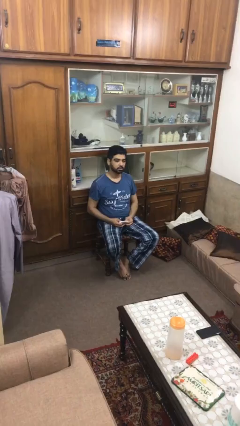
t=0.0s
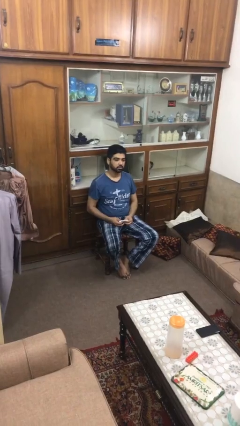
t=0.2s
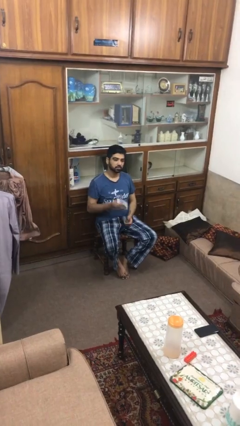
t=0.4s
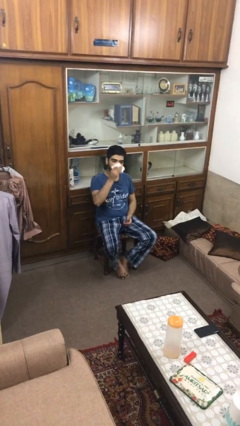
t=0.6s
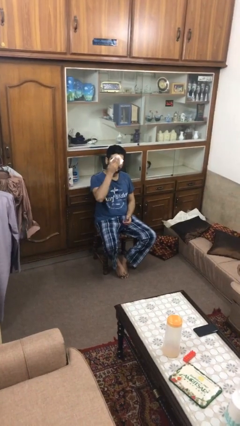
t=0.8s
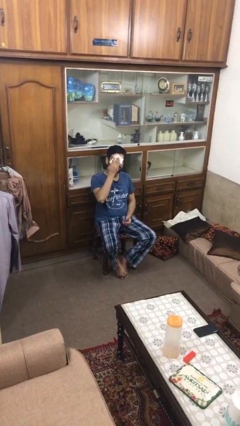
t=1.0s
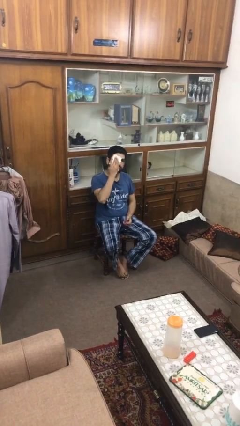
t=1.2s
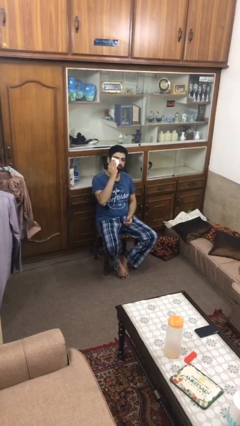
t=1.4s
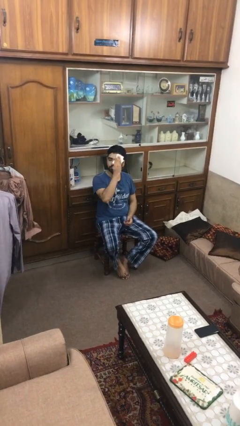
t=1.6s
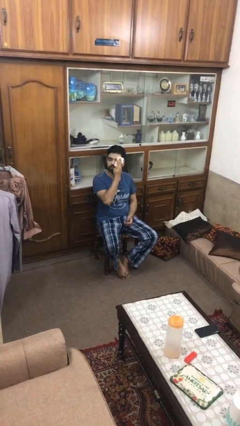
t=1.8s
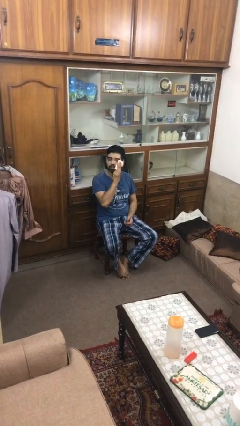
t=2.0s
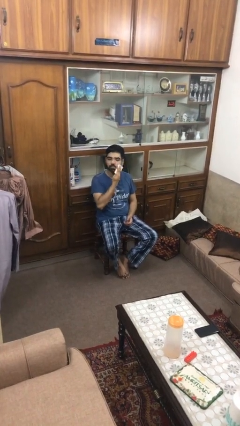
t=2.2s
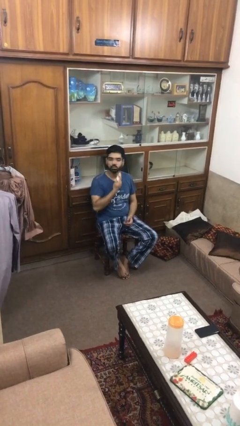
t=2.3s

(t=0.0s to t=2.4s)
person wipes mouth with napkin

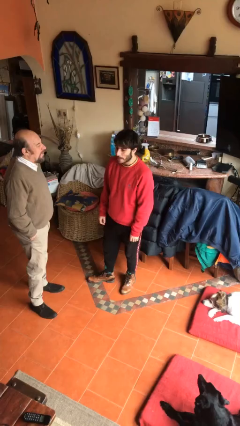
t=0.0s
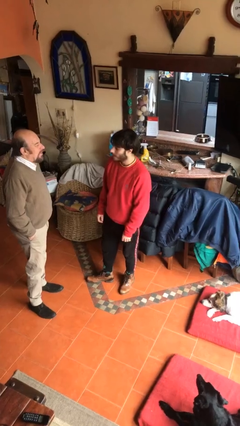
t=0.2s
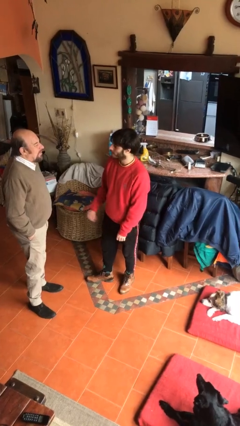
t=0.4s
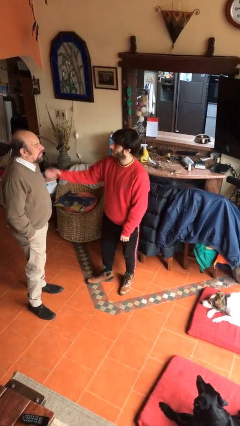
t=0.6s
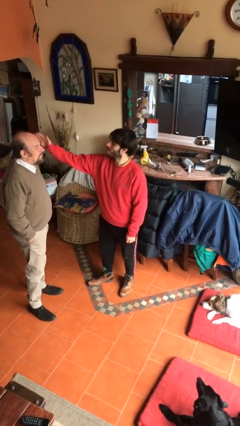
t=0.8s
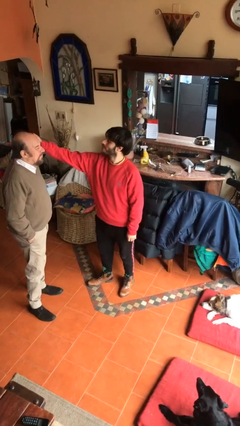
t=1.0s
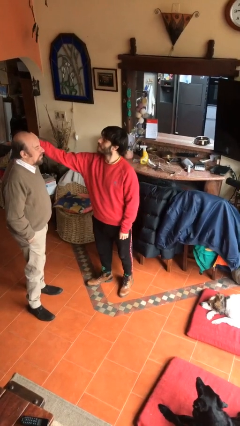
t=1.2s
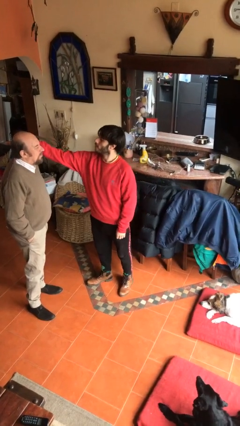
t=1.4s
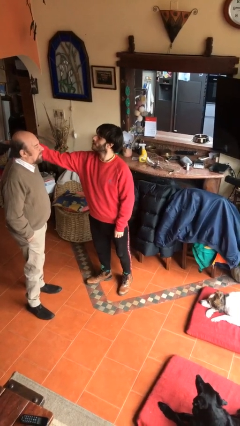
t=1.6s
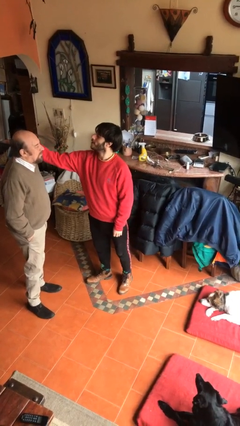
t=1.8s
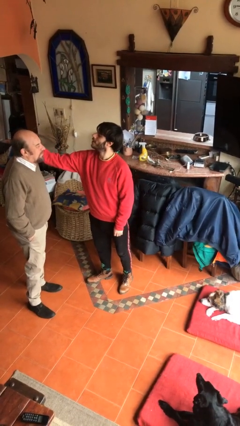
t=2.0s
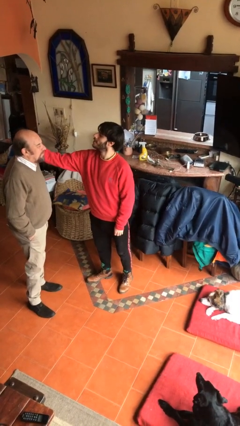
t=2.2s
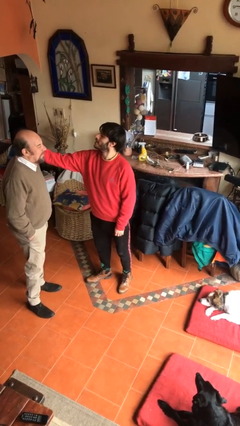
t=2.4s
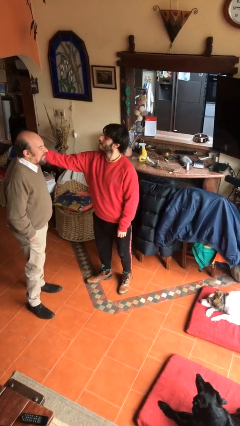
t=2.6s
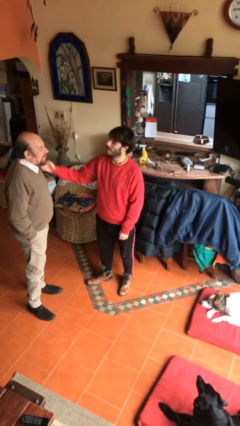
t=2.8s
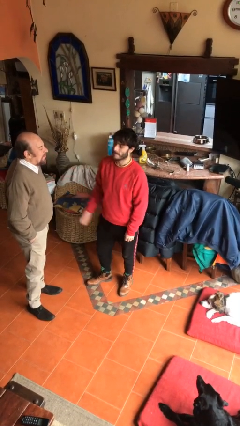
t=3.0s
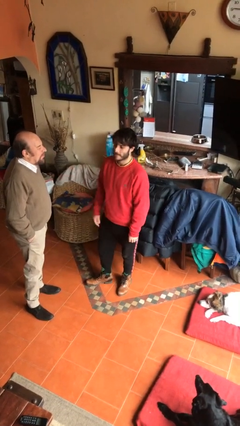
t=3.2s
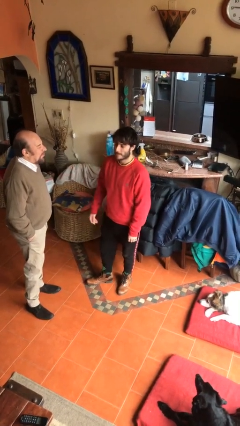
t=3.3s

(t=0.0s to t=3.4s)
person touches face of person

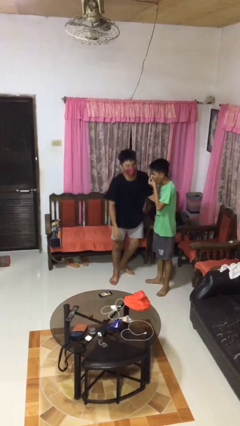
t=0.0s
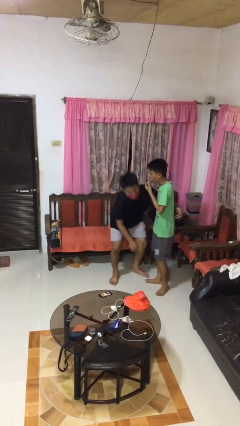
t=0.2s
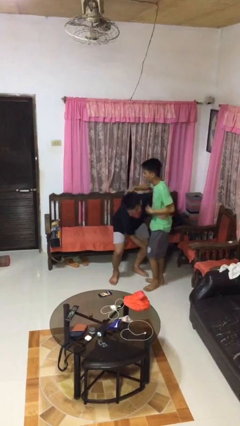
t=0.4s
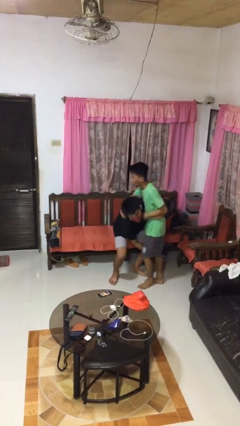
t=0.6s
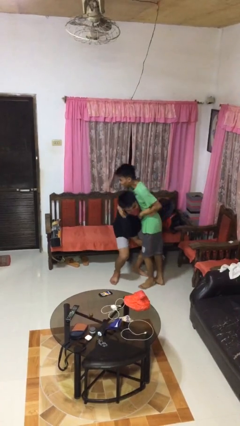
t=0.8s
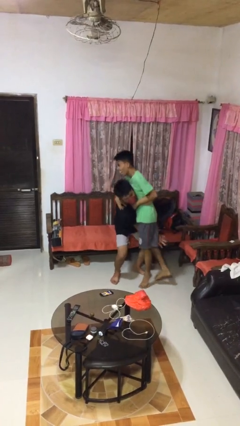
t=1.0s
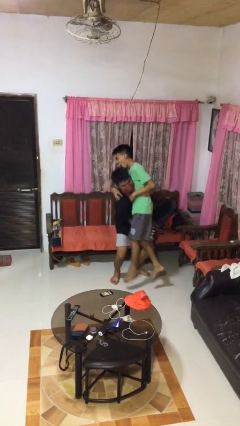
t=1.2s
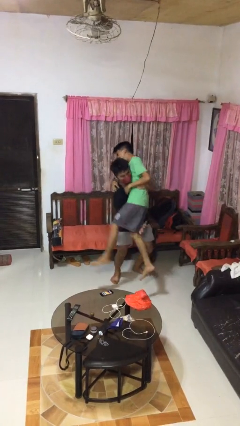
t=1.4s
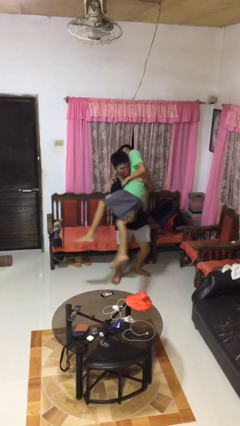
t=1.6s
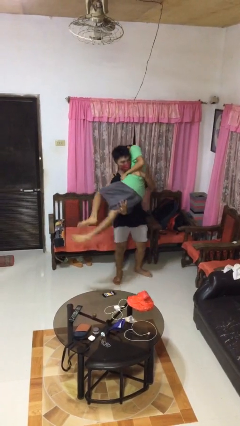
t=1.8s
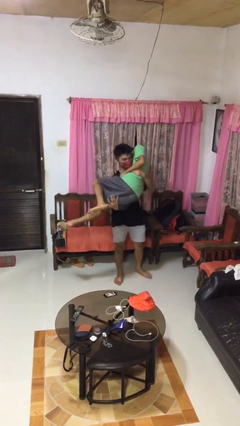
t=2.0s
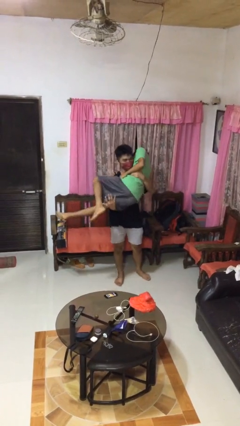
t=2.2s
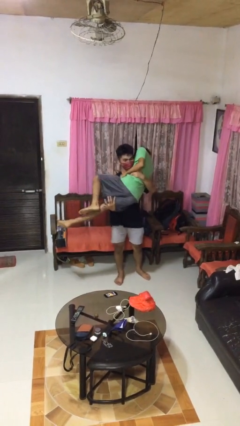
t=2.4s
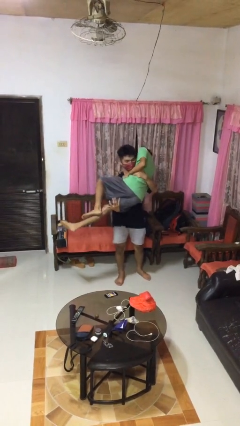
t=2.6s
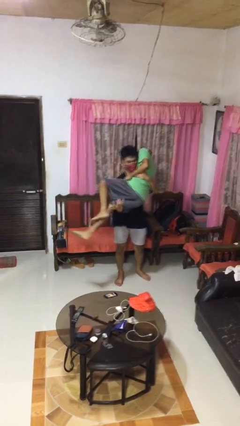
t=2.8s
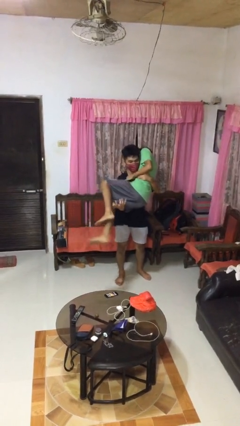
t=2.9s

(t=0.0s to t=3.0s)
person picks up person

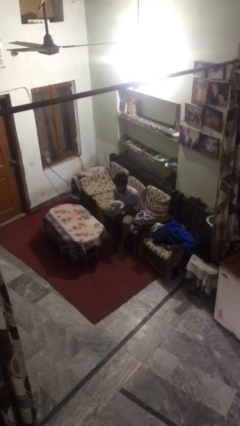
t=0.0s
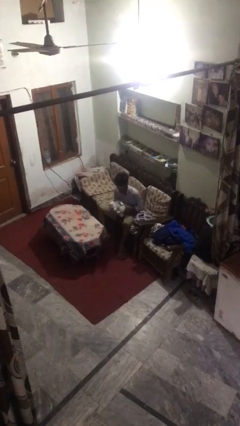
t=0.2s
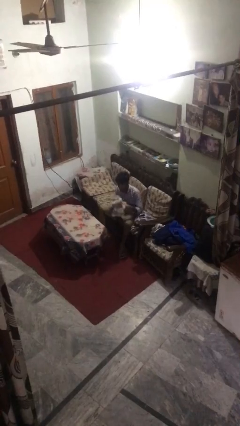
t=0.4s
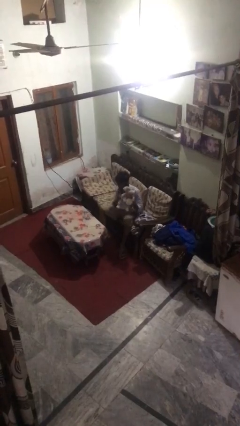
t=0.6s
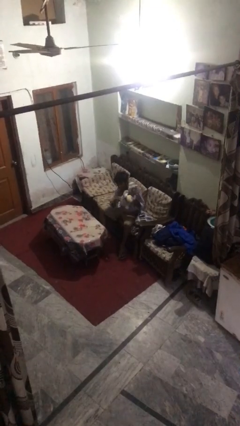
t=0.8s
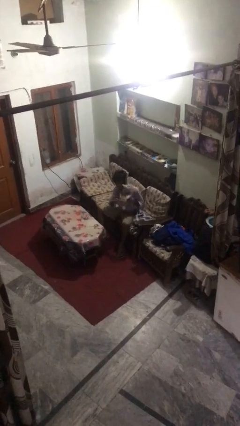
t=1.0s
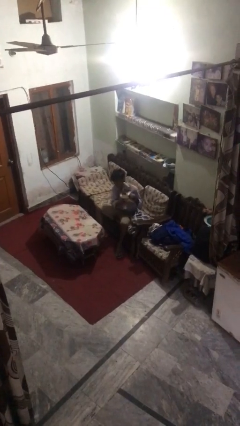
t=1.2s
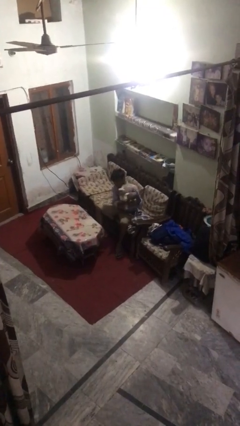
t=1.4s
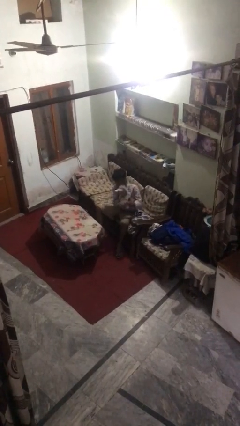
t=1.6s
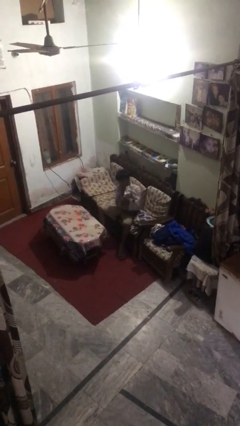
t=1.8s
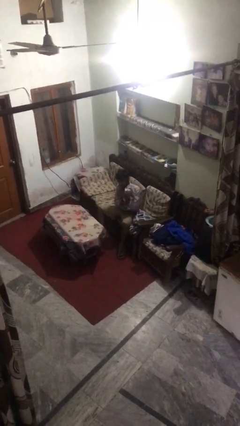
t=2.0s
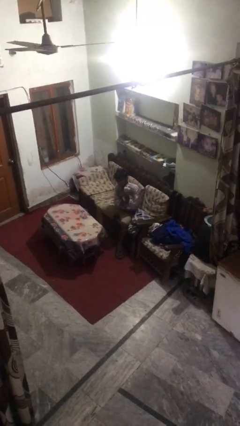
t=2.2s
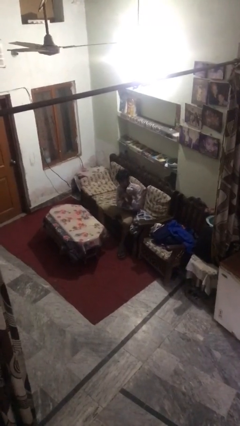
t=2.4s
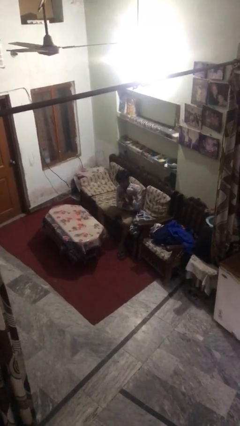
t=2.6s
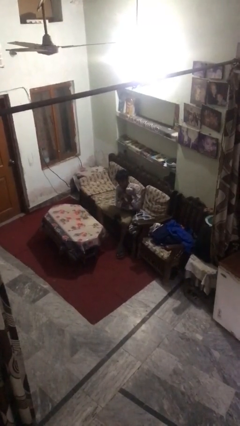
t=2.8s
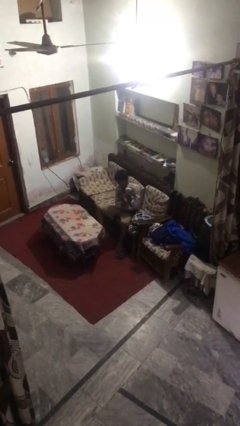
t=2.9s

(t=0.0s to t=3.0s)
person hugs stuffed animal

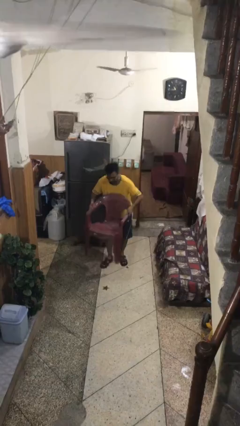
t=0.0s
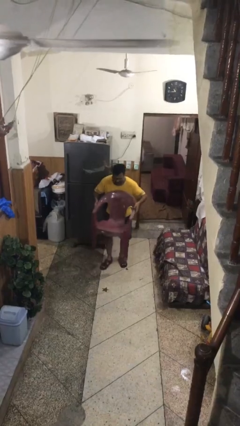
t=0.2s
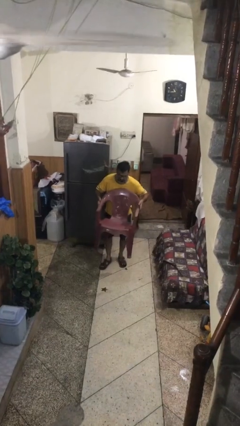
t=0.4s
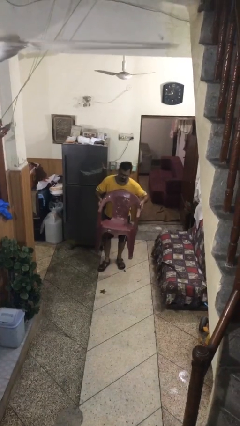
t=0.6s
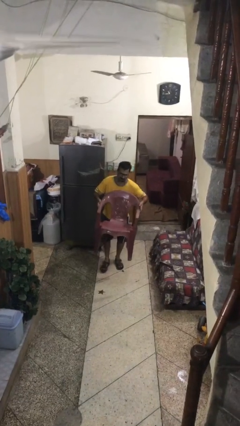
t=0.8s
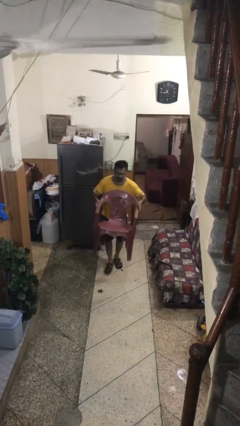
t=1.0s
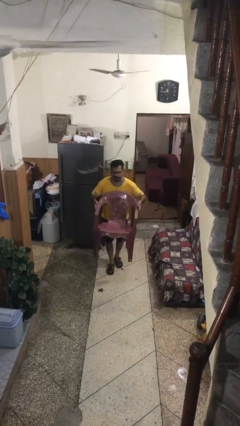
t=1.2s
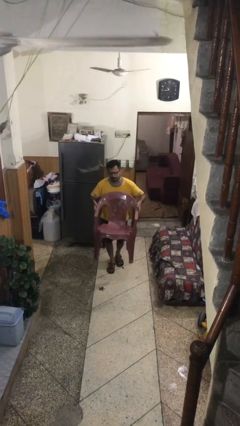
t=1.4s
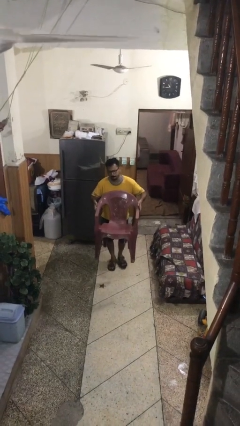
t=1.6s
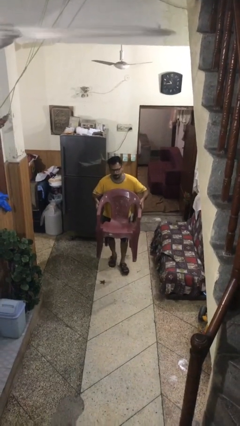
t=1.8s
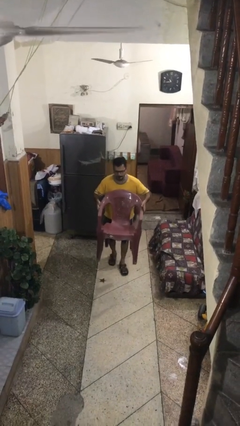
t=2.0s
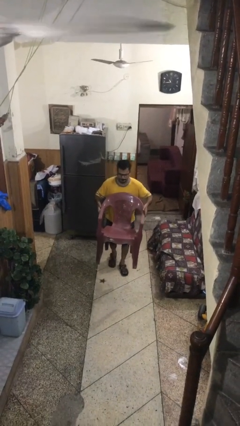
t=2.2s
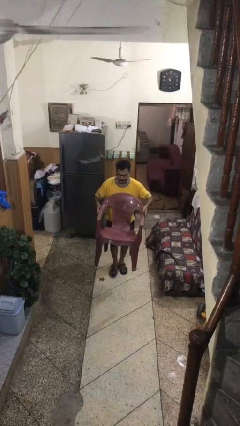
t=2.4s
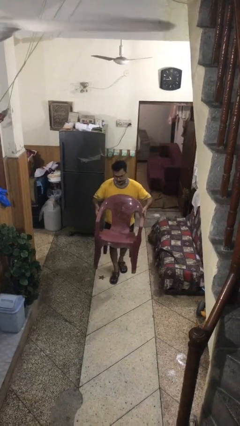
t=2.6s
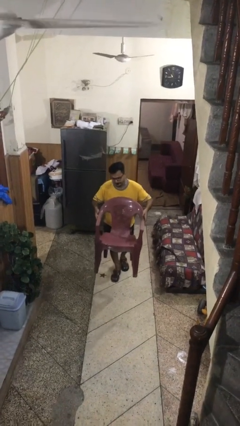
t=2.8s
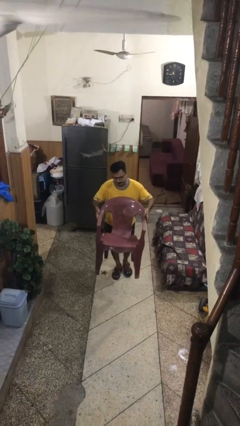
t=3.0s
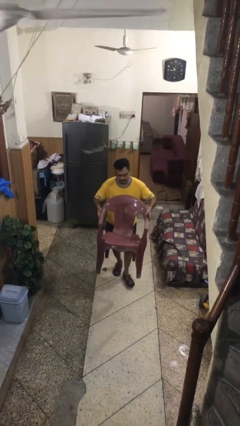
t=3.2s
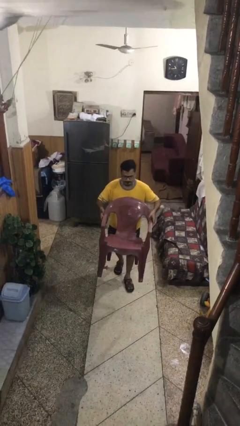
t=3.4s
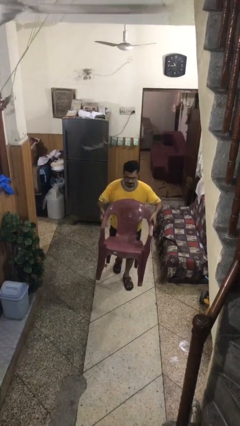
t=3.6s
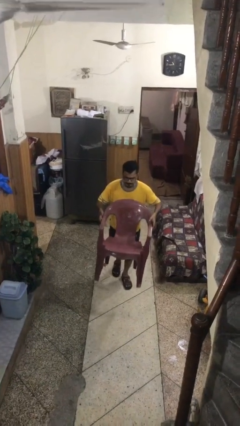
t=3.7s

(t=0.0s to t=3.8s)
person carries heavy object

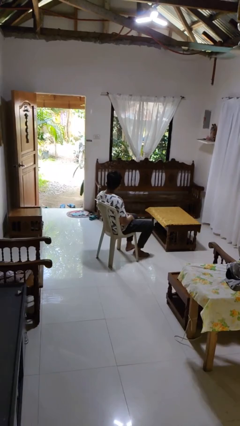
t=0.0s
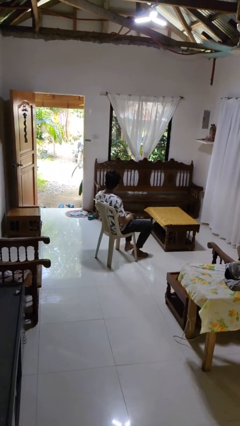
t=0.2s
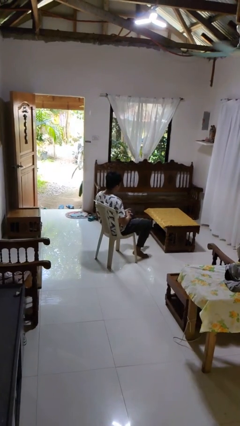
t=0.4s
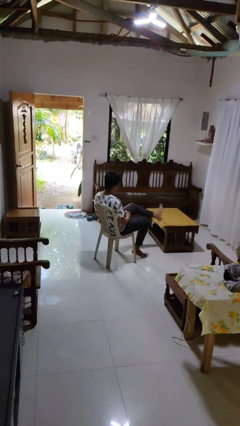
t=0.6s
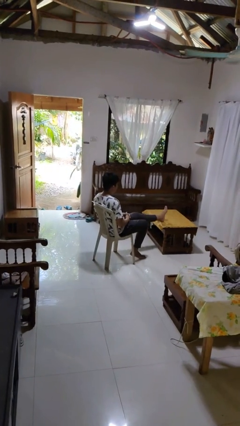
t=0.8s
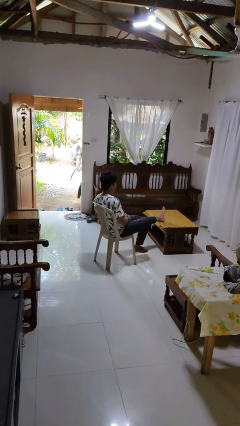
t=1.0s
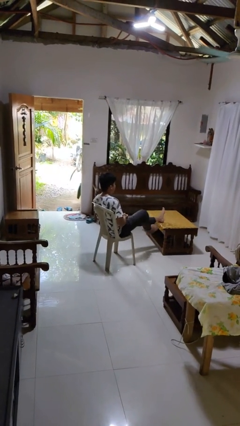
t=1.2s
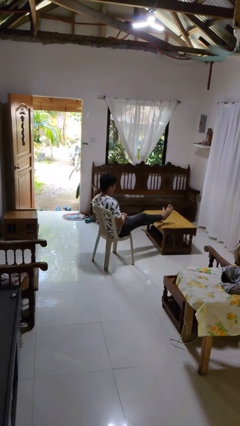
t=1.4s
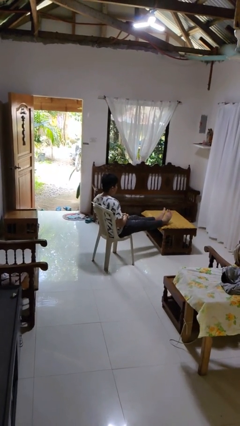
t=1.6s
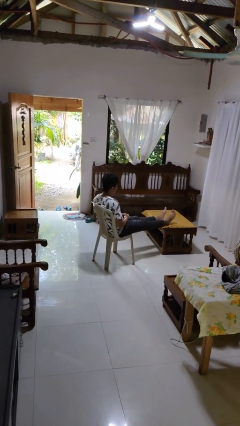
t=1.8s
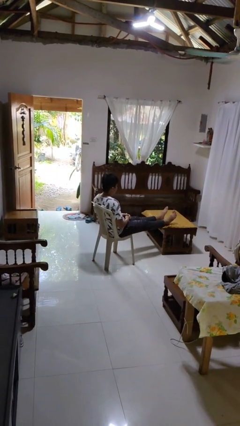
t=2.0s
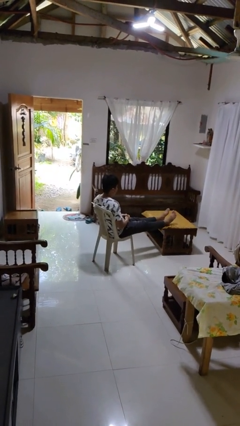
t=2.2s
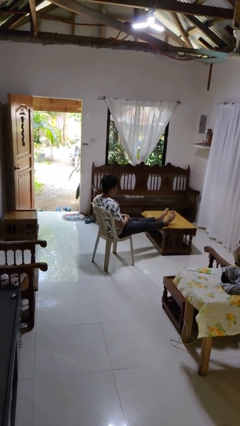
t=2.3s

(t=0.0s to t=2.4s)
person puts feet up
